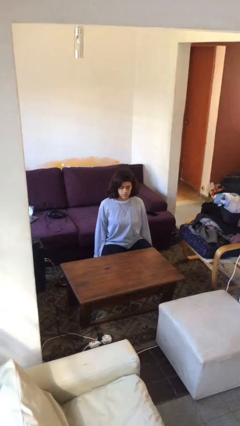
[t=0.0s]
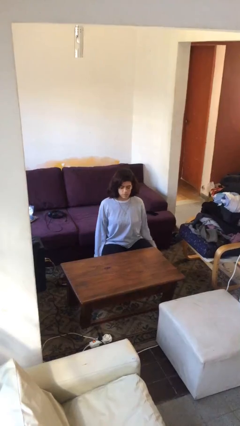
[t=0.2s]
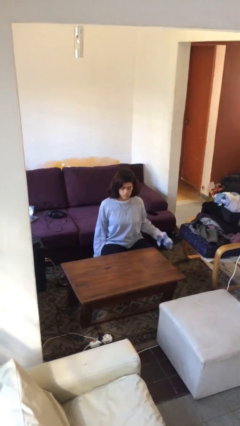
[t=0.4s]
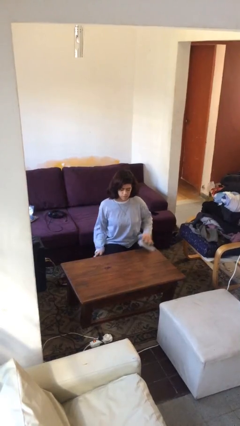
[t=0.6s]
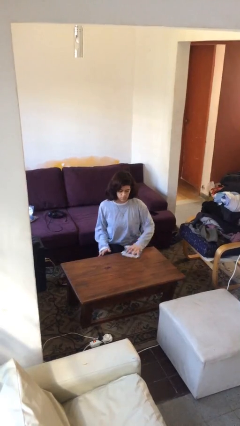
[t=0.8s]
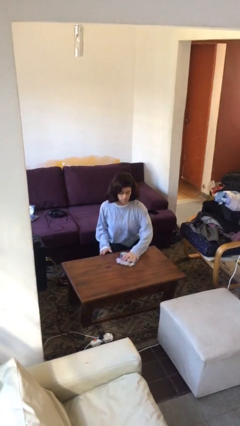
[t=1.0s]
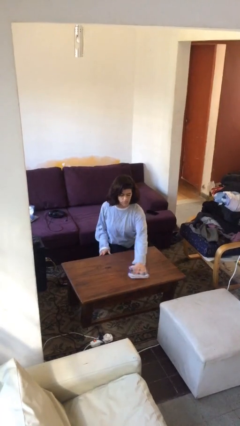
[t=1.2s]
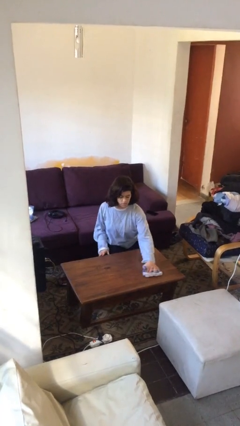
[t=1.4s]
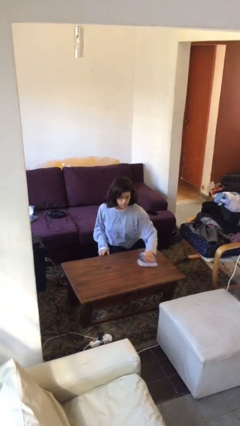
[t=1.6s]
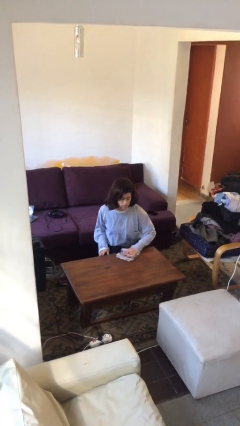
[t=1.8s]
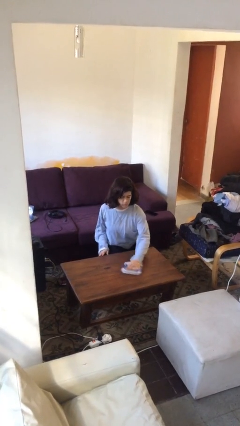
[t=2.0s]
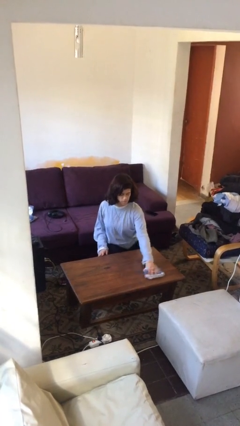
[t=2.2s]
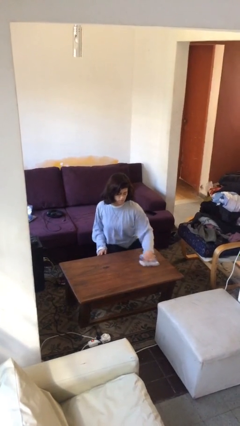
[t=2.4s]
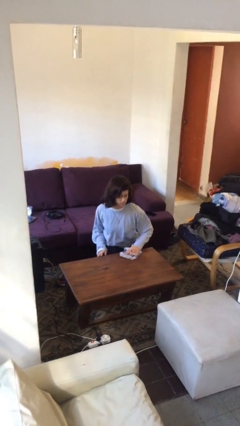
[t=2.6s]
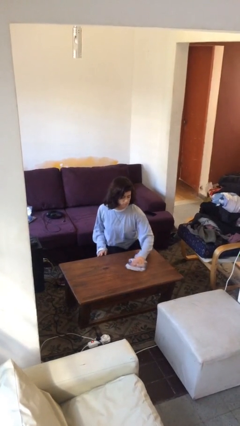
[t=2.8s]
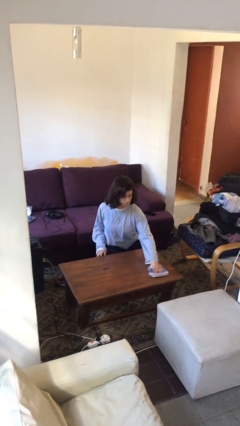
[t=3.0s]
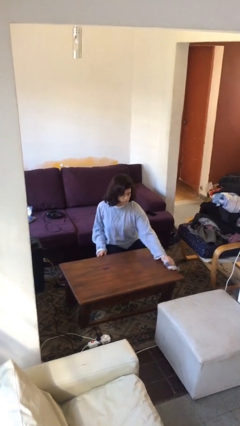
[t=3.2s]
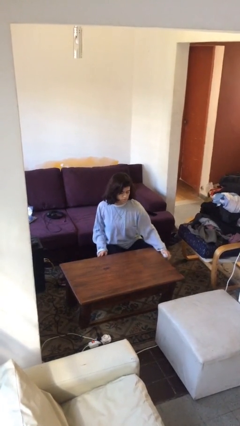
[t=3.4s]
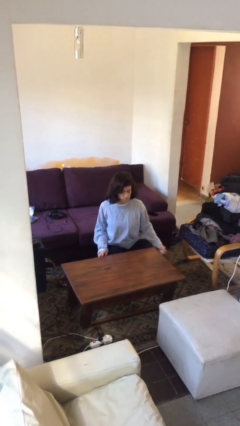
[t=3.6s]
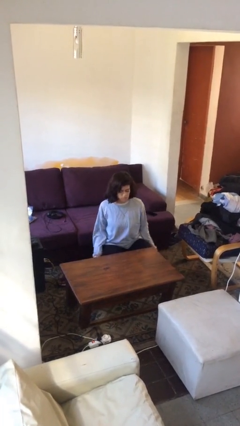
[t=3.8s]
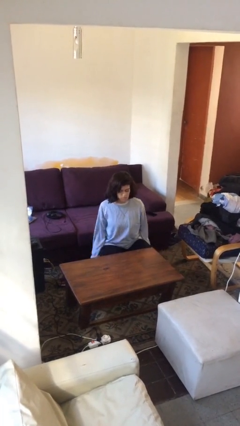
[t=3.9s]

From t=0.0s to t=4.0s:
person cleans table with rag

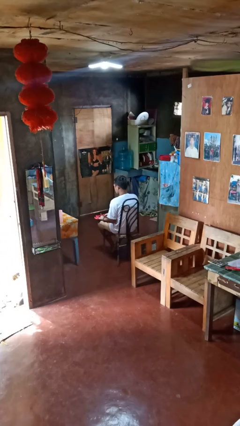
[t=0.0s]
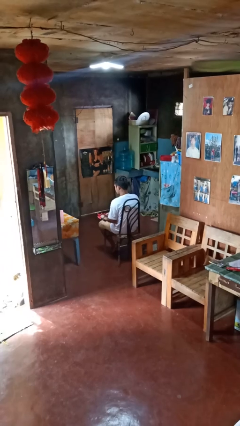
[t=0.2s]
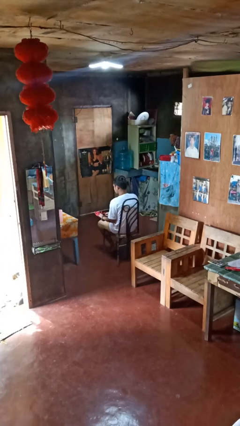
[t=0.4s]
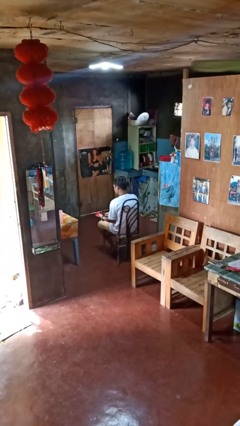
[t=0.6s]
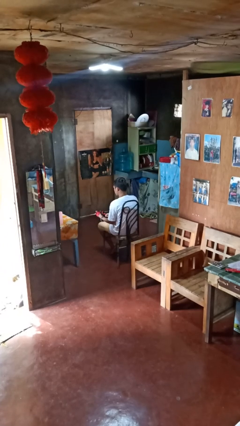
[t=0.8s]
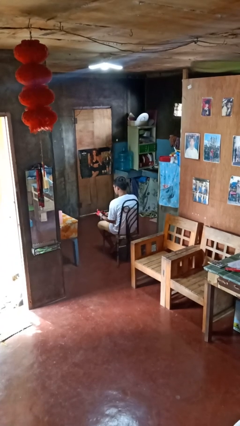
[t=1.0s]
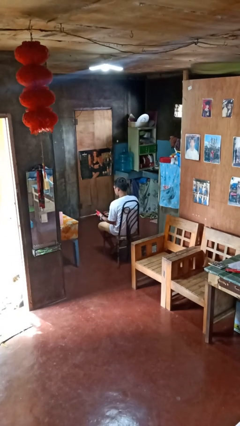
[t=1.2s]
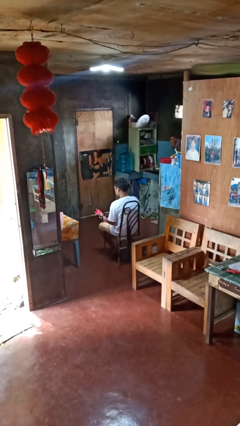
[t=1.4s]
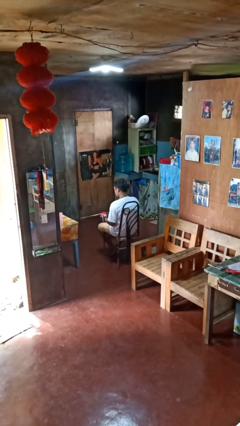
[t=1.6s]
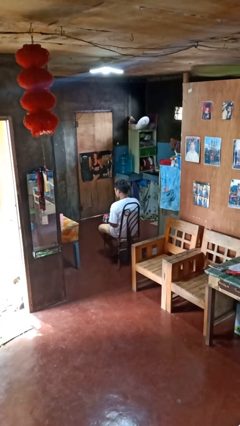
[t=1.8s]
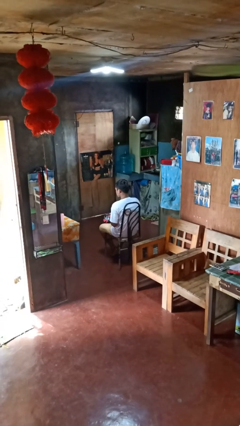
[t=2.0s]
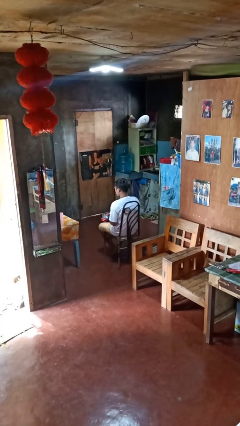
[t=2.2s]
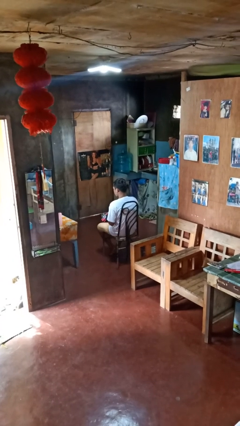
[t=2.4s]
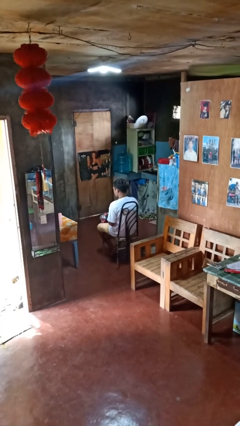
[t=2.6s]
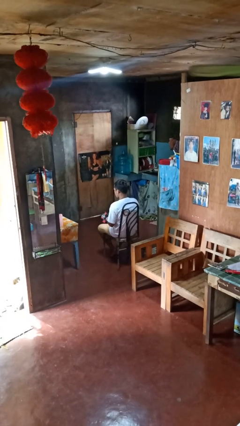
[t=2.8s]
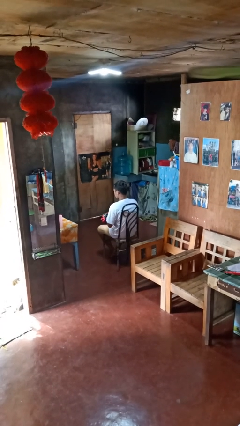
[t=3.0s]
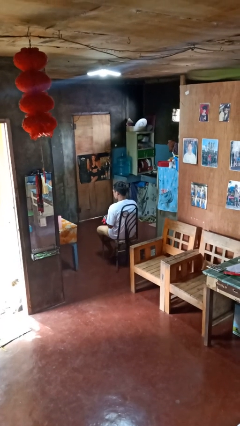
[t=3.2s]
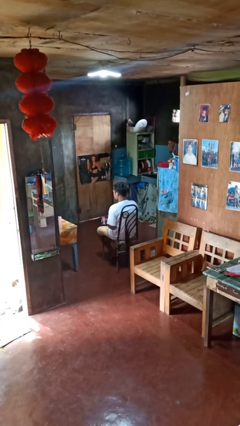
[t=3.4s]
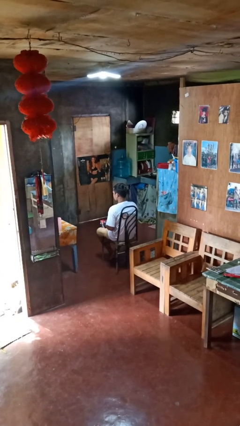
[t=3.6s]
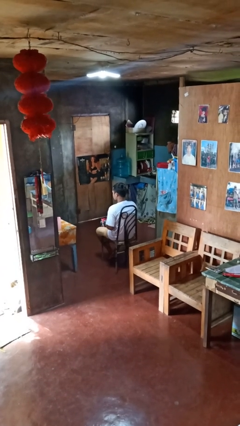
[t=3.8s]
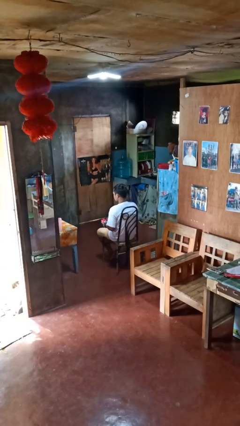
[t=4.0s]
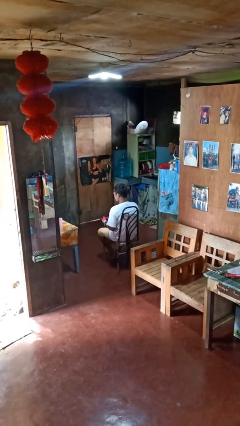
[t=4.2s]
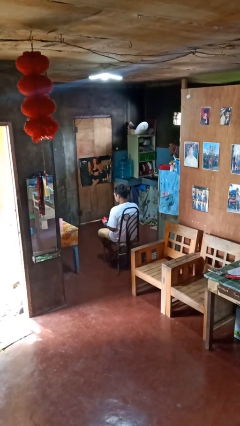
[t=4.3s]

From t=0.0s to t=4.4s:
person puts on gloves

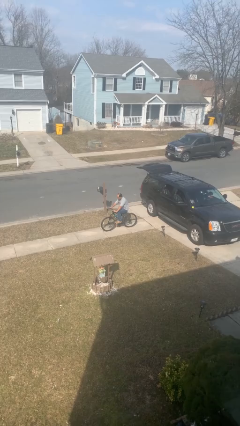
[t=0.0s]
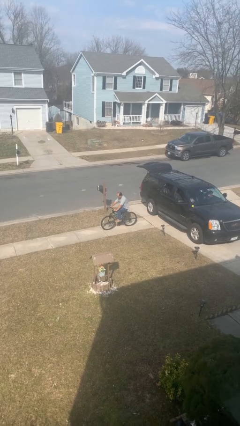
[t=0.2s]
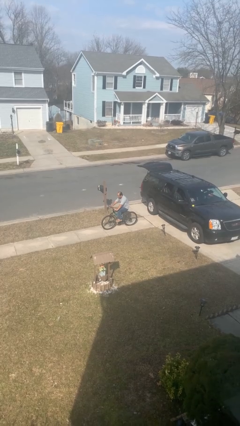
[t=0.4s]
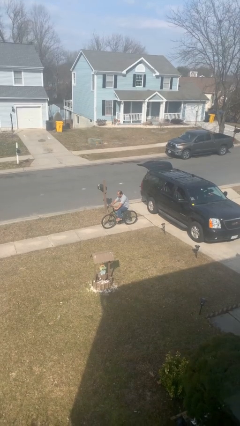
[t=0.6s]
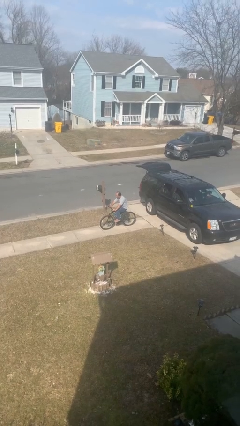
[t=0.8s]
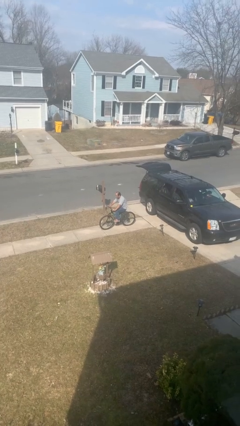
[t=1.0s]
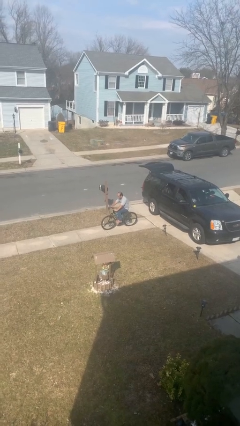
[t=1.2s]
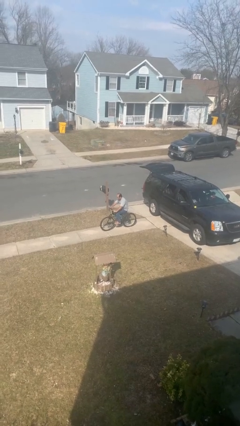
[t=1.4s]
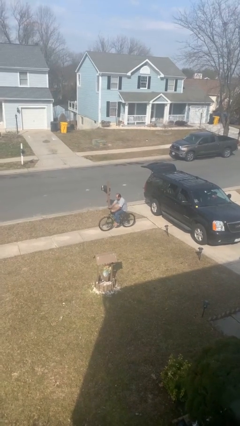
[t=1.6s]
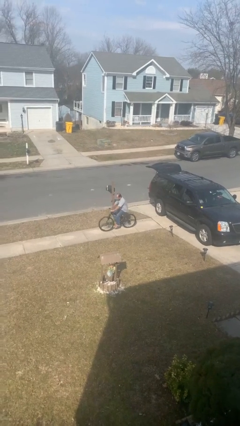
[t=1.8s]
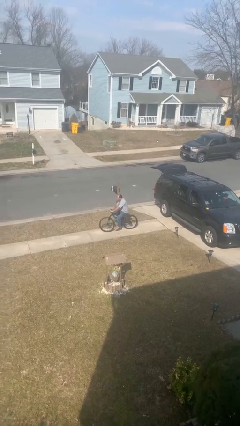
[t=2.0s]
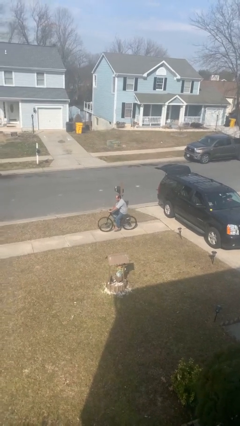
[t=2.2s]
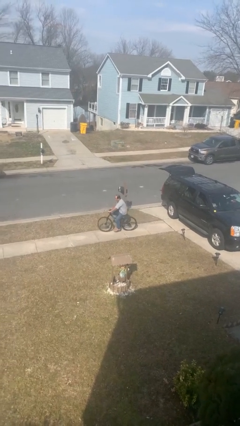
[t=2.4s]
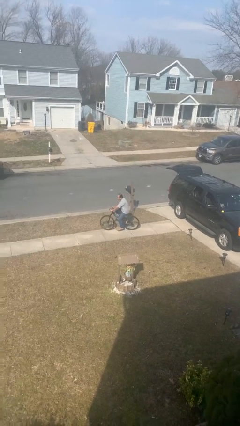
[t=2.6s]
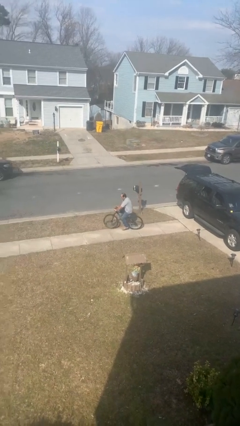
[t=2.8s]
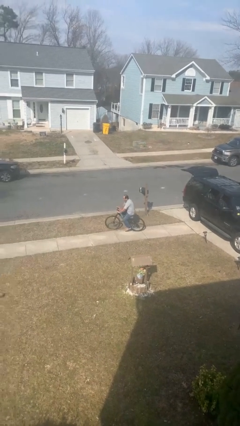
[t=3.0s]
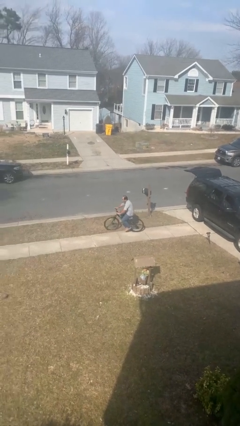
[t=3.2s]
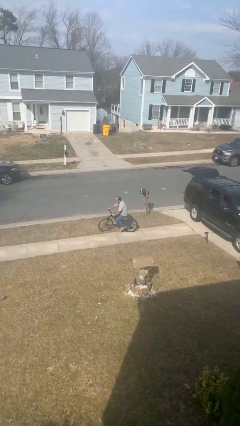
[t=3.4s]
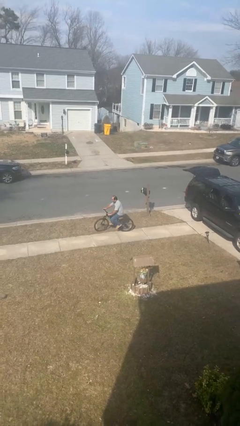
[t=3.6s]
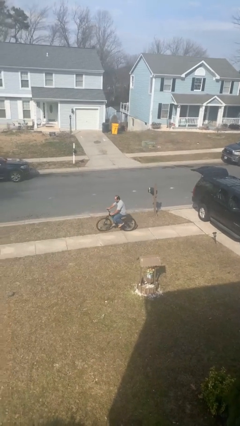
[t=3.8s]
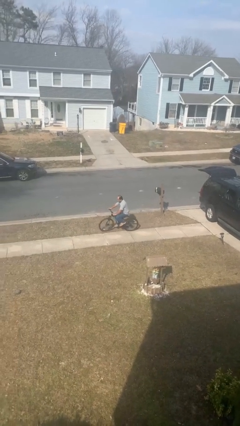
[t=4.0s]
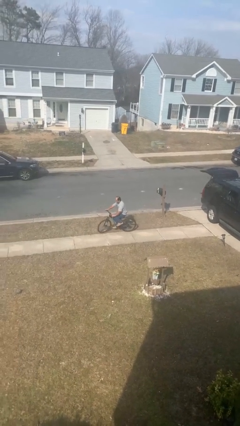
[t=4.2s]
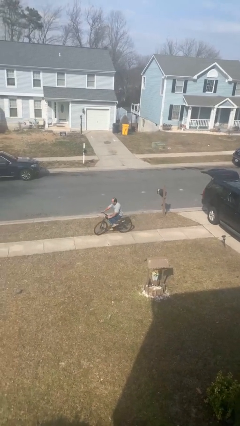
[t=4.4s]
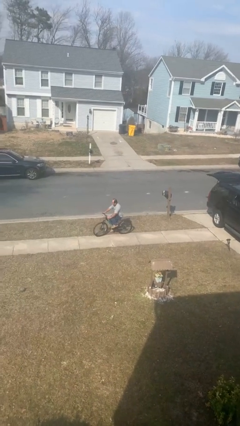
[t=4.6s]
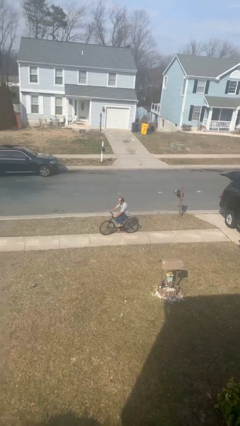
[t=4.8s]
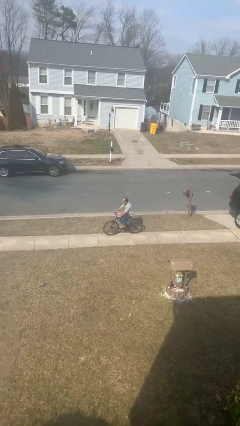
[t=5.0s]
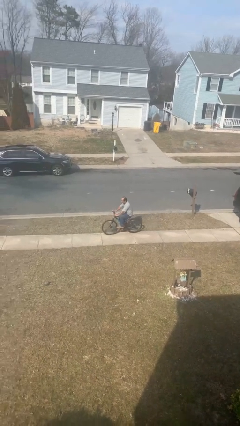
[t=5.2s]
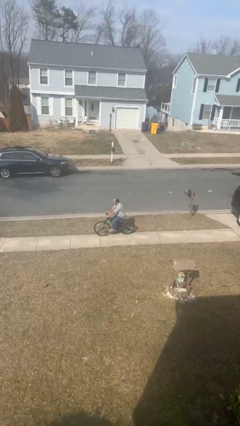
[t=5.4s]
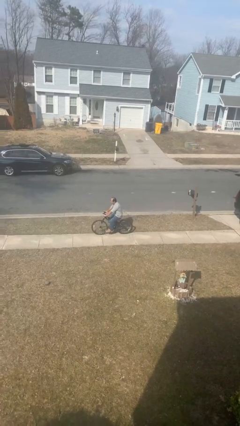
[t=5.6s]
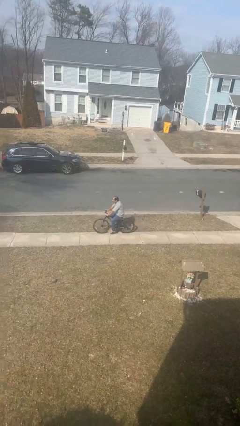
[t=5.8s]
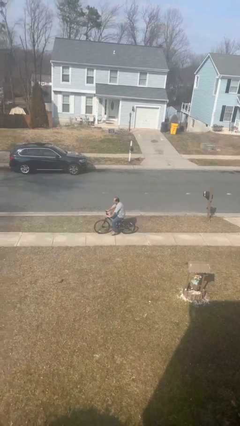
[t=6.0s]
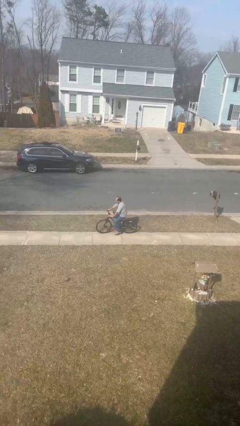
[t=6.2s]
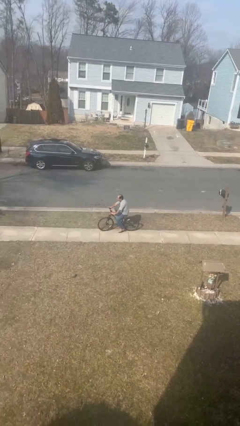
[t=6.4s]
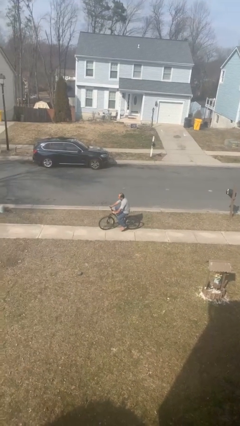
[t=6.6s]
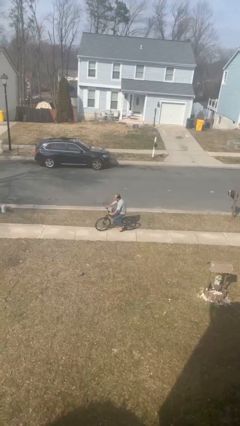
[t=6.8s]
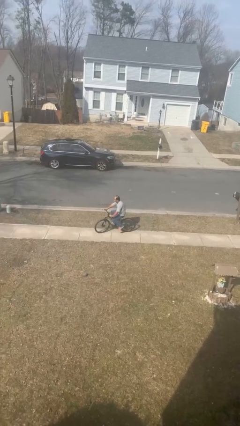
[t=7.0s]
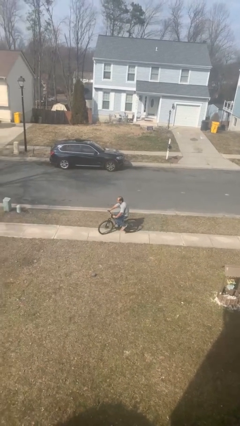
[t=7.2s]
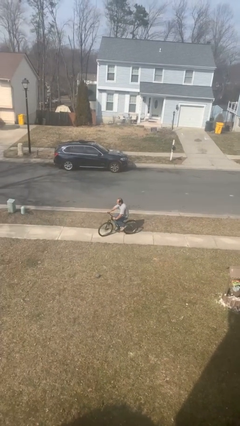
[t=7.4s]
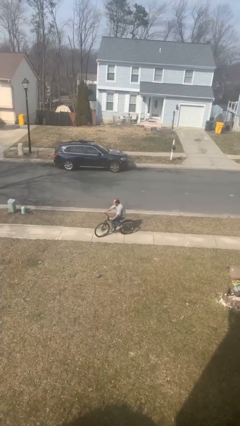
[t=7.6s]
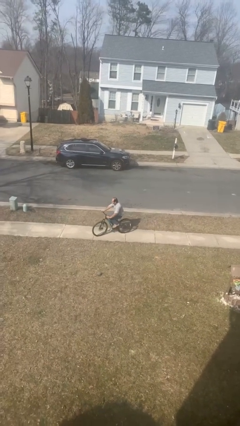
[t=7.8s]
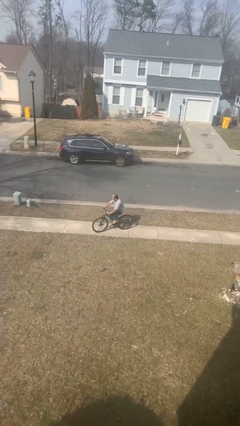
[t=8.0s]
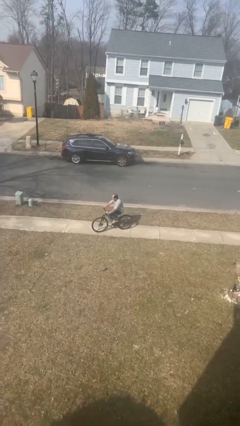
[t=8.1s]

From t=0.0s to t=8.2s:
person rides bicycle

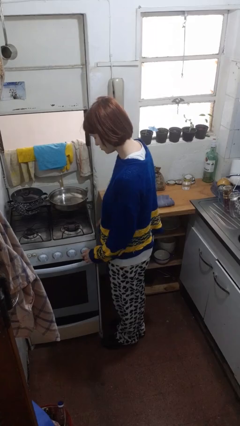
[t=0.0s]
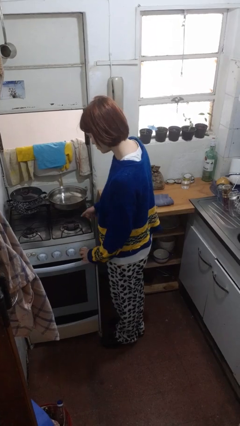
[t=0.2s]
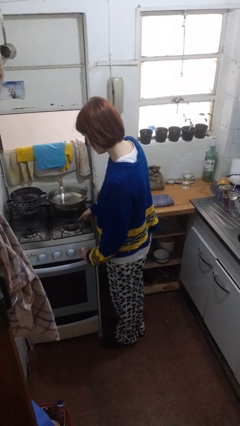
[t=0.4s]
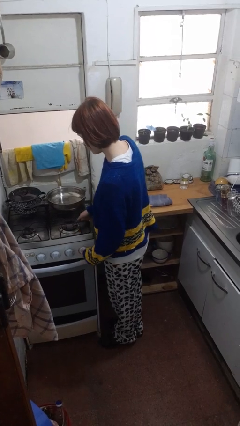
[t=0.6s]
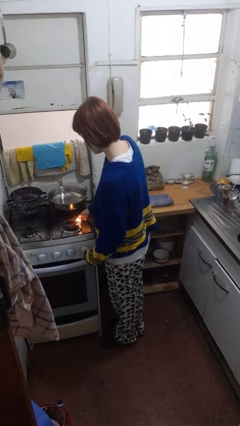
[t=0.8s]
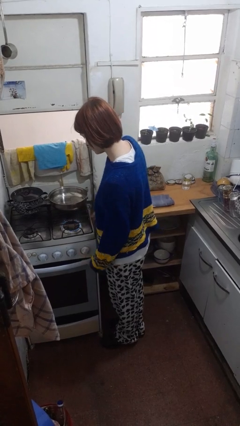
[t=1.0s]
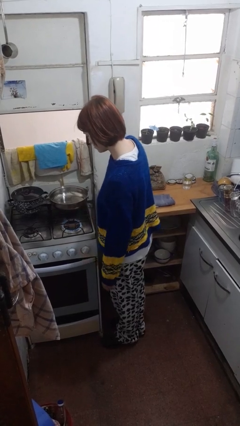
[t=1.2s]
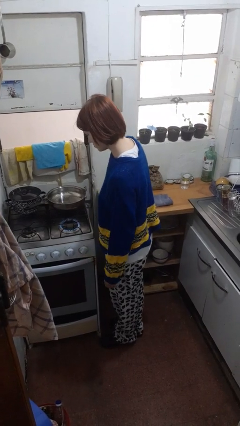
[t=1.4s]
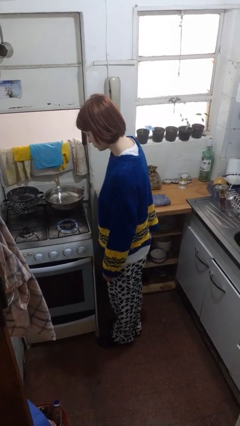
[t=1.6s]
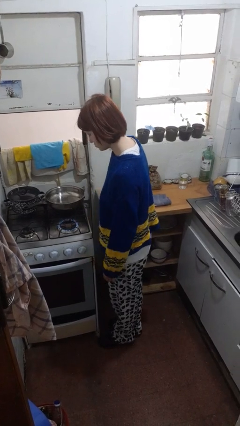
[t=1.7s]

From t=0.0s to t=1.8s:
person turns on stovetop
